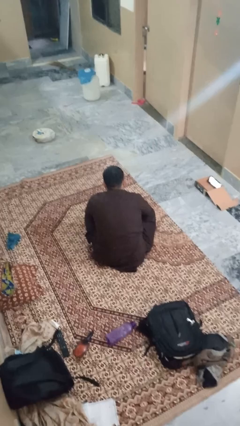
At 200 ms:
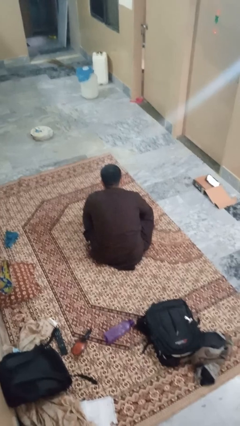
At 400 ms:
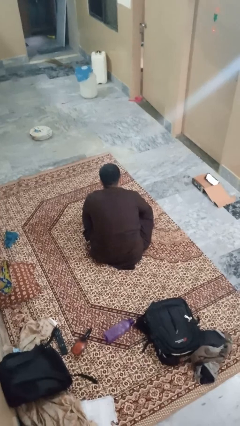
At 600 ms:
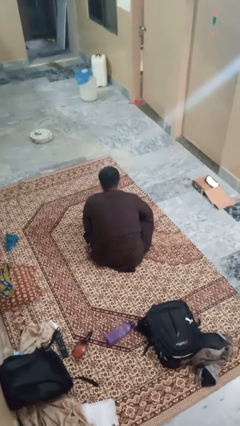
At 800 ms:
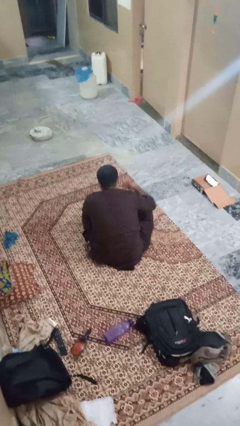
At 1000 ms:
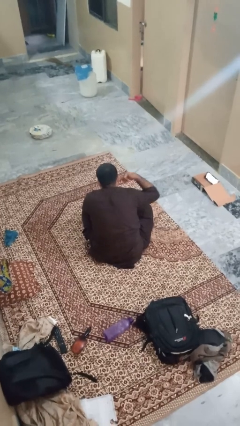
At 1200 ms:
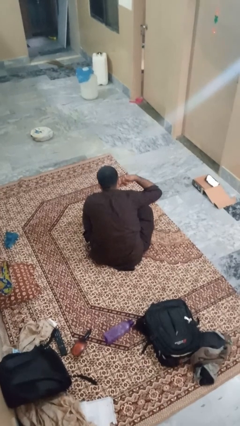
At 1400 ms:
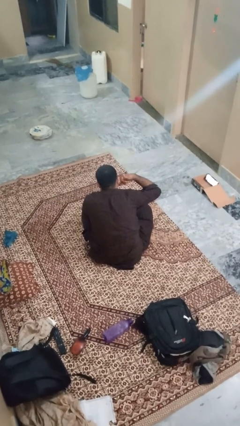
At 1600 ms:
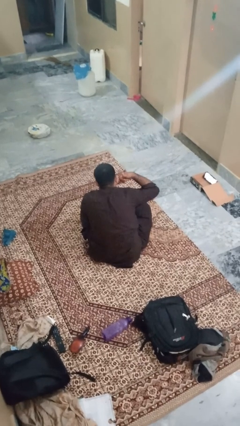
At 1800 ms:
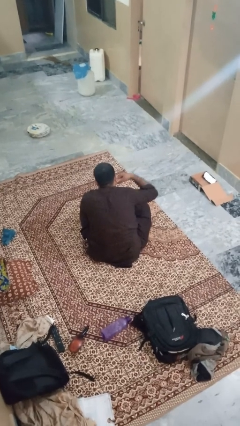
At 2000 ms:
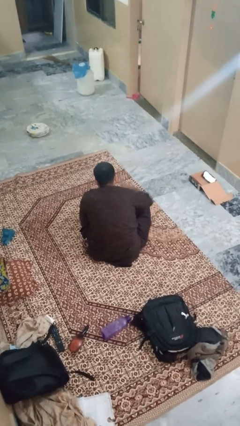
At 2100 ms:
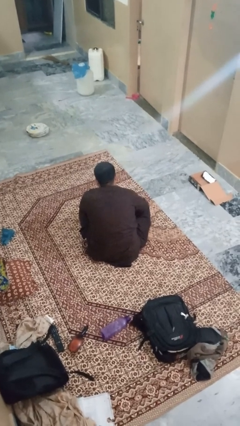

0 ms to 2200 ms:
person gestures call me

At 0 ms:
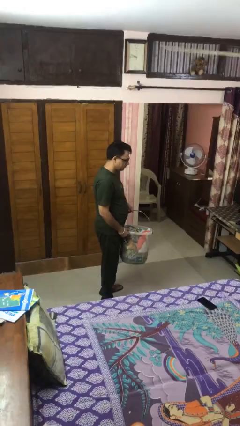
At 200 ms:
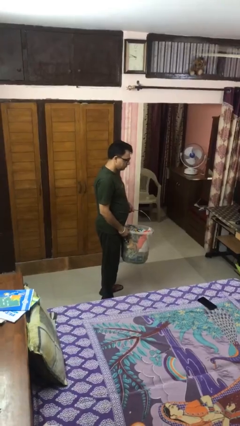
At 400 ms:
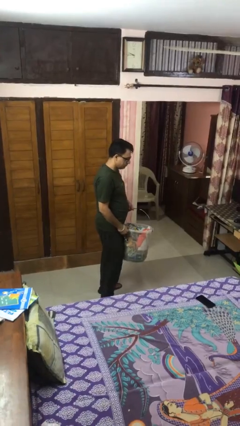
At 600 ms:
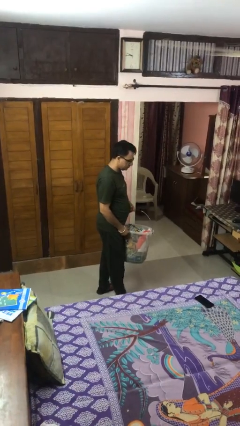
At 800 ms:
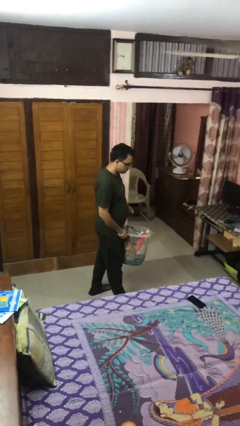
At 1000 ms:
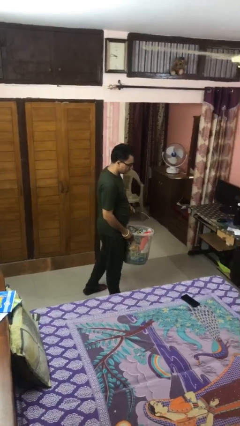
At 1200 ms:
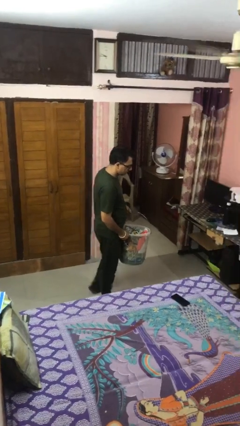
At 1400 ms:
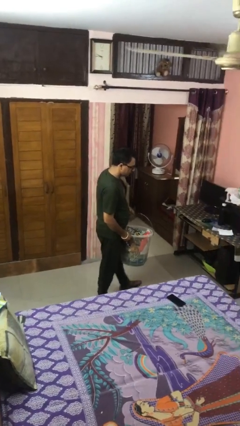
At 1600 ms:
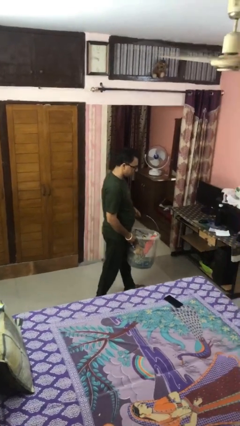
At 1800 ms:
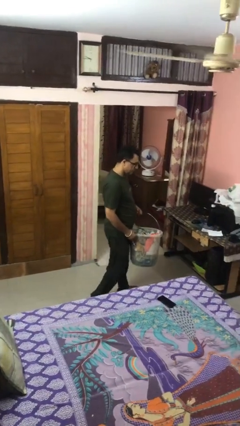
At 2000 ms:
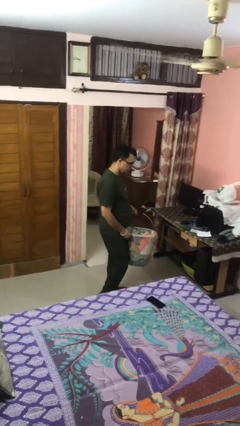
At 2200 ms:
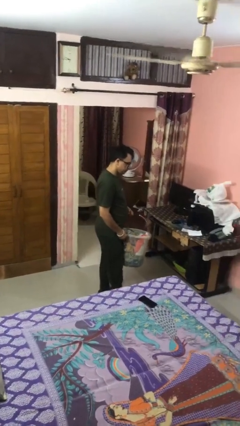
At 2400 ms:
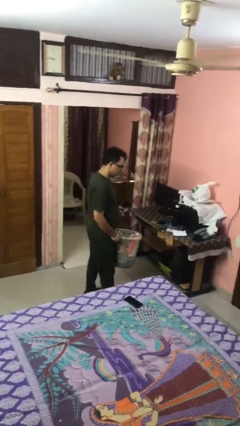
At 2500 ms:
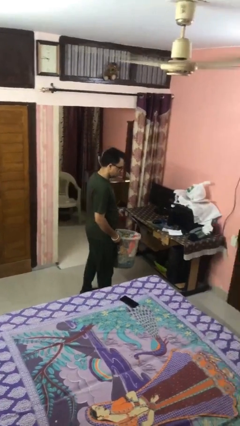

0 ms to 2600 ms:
person carries laundry basket

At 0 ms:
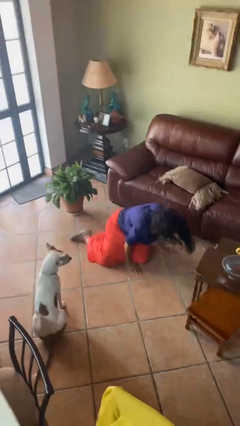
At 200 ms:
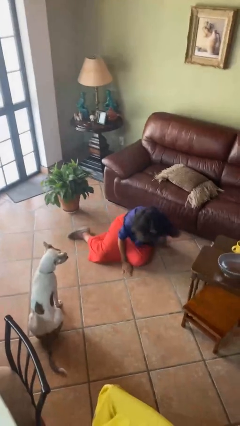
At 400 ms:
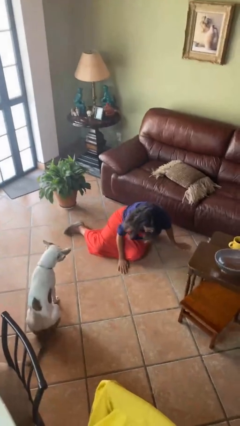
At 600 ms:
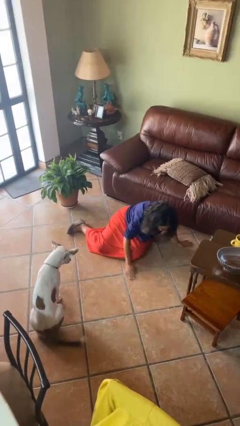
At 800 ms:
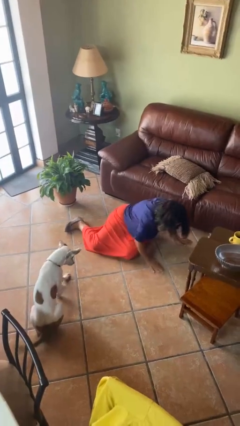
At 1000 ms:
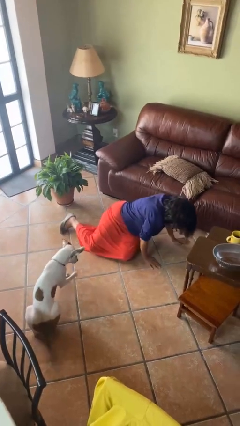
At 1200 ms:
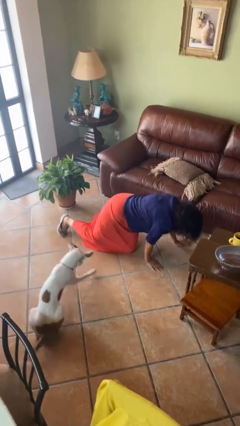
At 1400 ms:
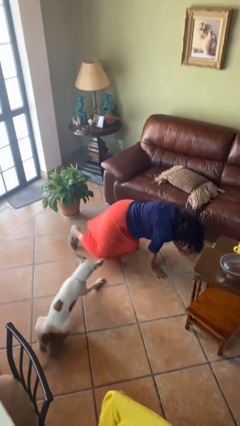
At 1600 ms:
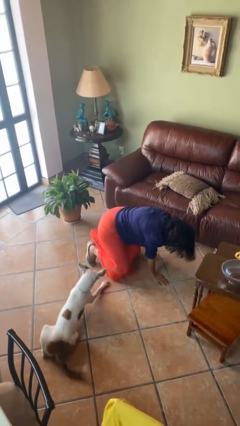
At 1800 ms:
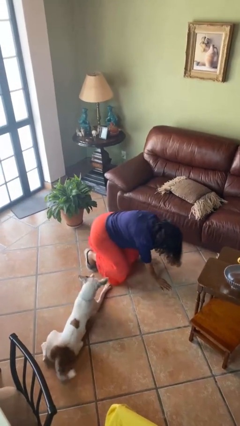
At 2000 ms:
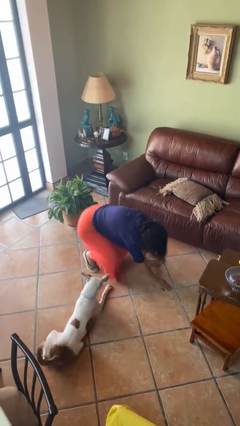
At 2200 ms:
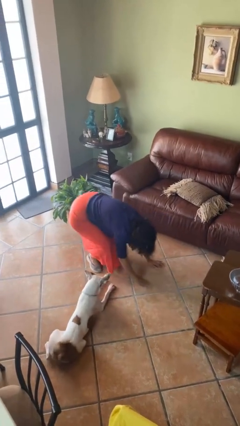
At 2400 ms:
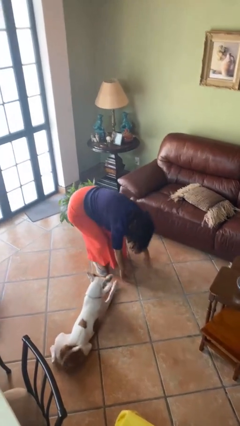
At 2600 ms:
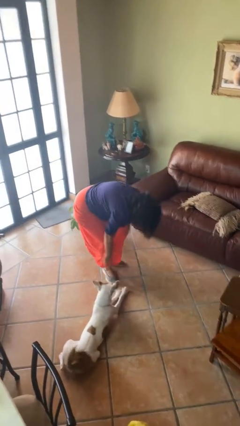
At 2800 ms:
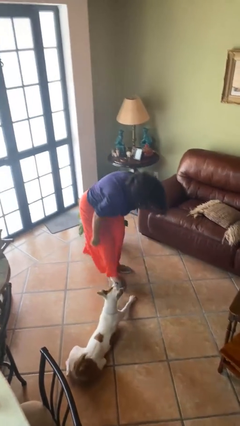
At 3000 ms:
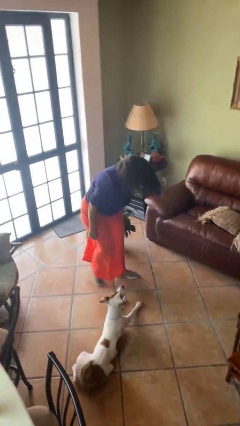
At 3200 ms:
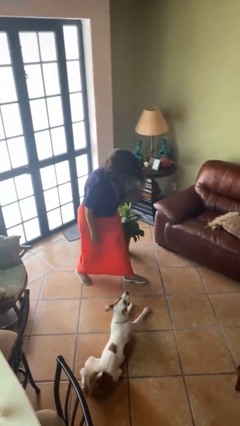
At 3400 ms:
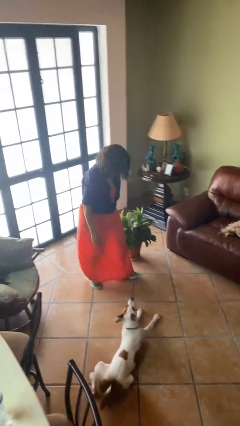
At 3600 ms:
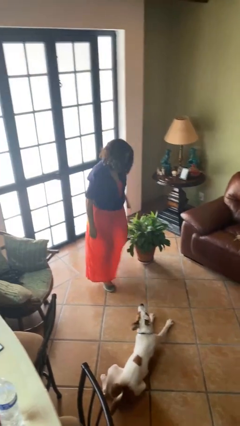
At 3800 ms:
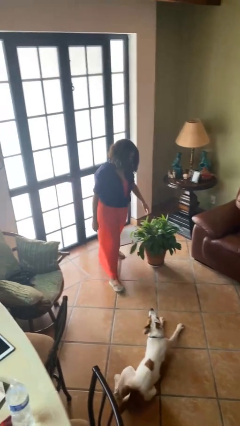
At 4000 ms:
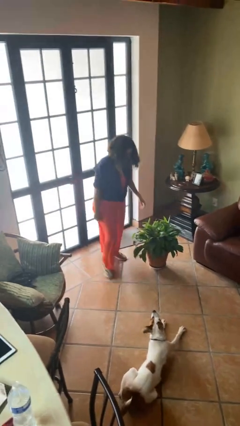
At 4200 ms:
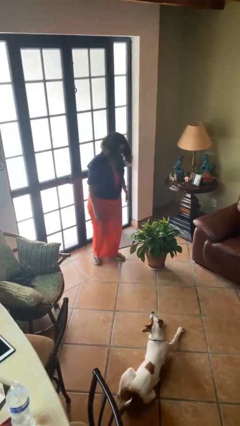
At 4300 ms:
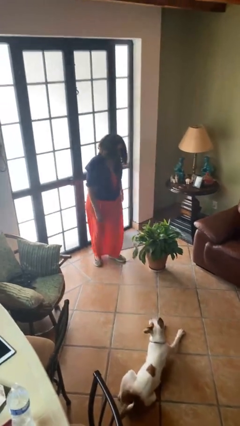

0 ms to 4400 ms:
person stands up from floor

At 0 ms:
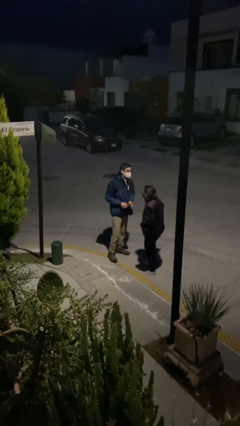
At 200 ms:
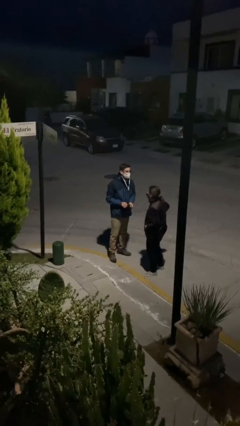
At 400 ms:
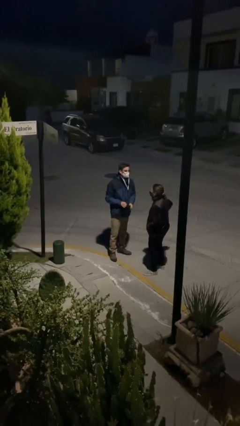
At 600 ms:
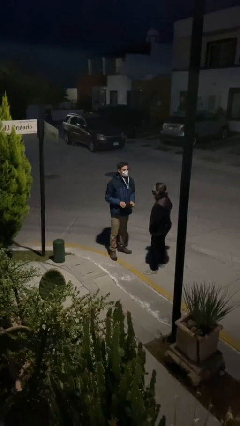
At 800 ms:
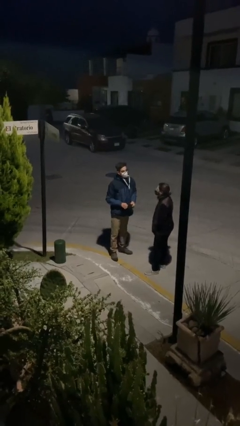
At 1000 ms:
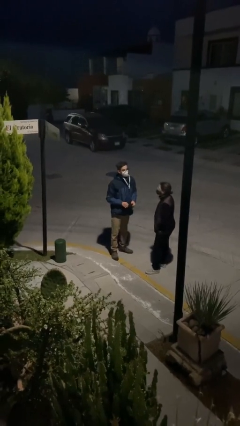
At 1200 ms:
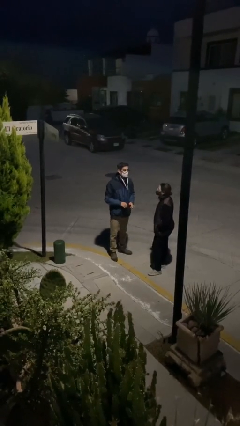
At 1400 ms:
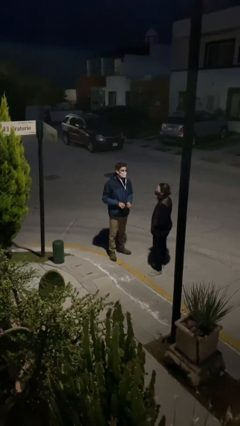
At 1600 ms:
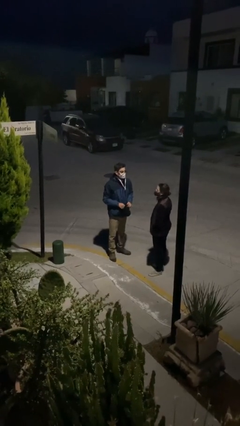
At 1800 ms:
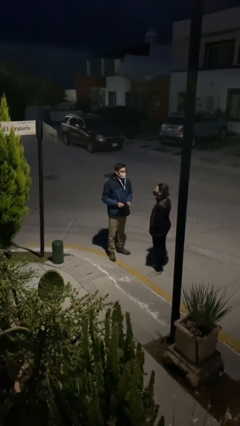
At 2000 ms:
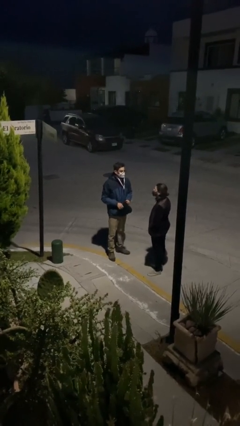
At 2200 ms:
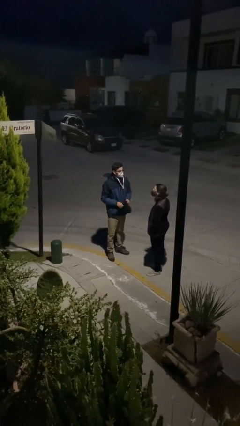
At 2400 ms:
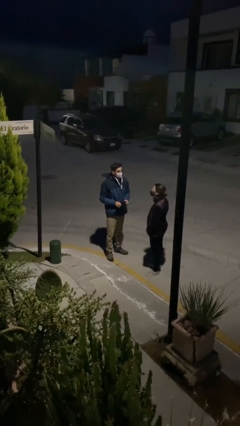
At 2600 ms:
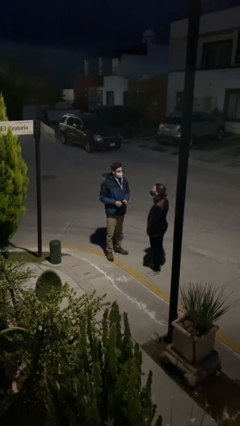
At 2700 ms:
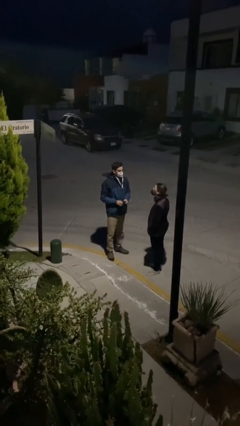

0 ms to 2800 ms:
person talks to person

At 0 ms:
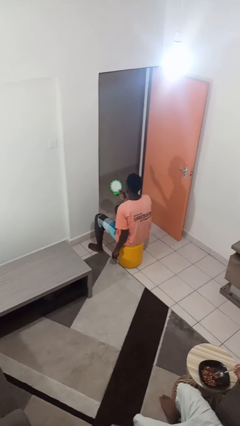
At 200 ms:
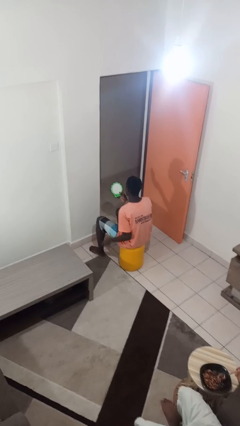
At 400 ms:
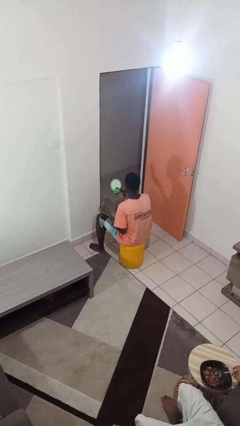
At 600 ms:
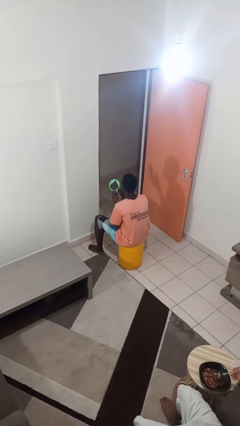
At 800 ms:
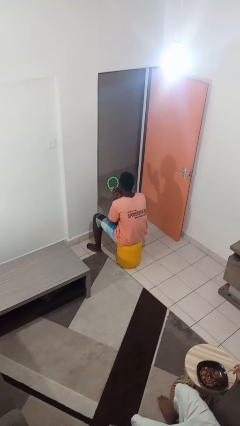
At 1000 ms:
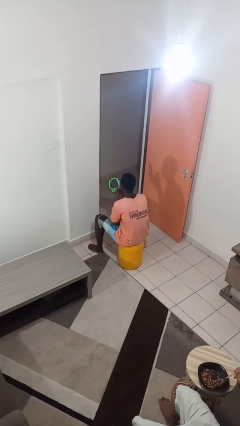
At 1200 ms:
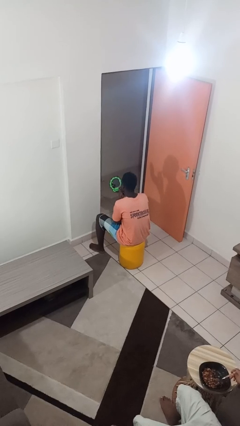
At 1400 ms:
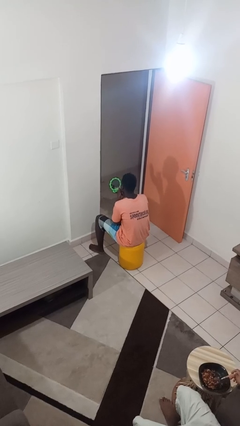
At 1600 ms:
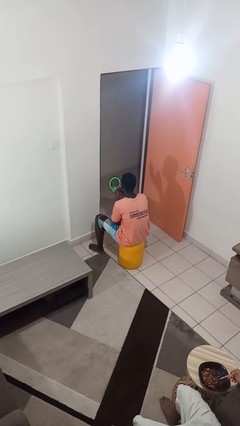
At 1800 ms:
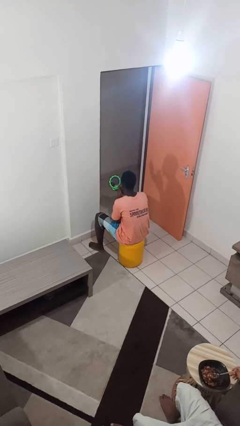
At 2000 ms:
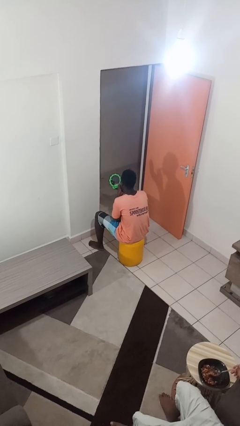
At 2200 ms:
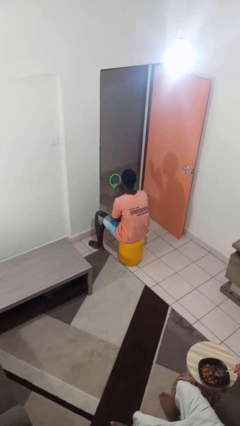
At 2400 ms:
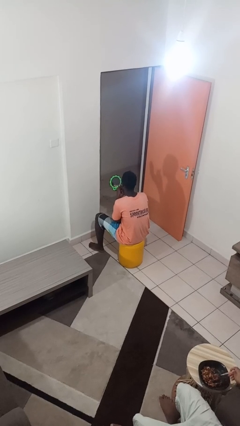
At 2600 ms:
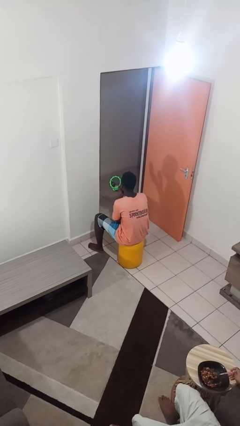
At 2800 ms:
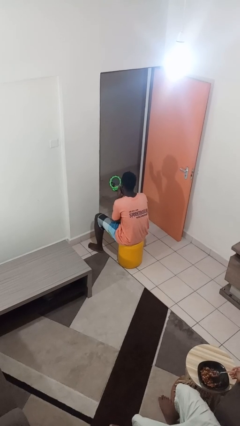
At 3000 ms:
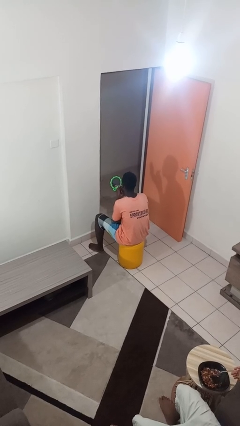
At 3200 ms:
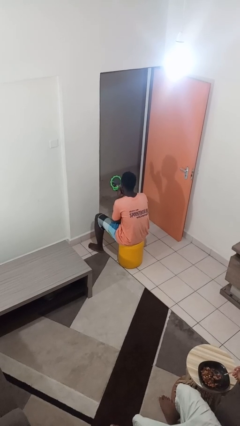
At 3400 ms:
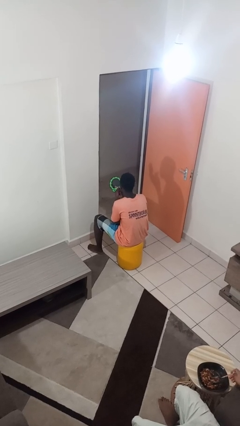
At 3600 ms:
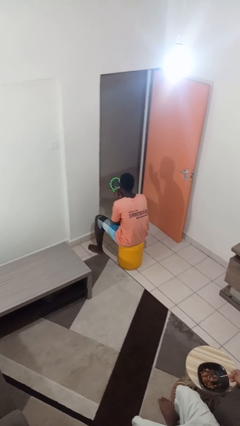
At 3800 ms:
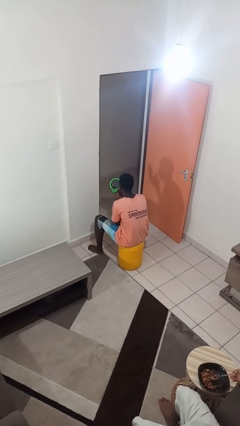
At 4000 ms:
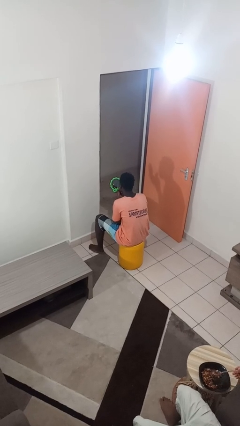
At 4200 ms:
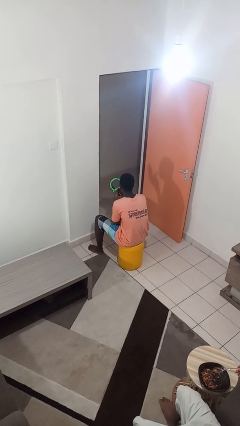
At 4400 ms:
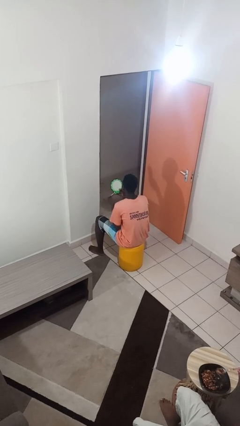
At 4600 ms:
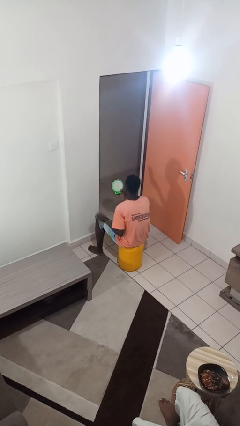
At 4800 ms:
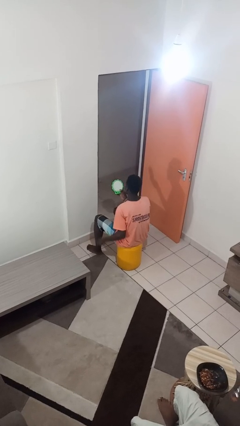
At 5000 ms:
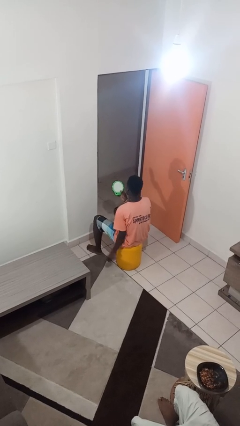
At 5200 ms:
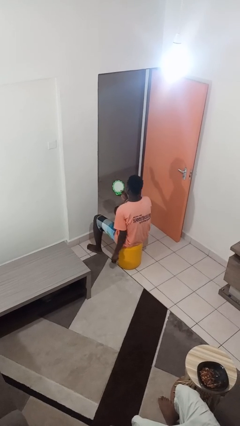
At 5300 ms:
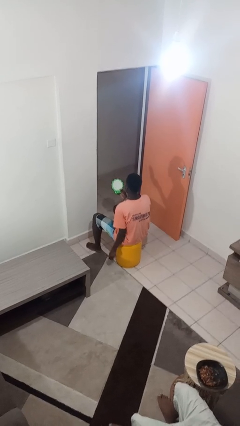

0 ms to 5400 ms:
person applies lip makeup
